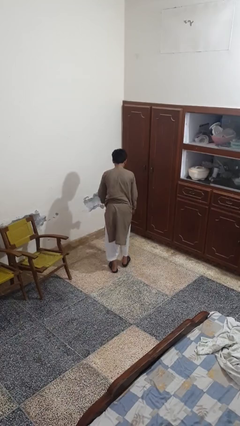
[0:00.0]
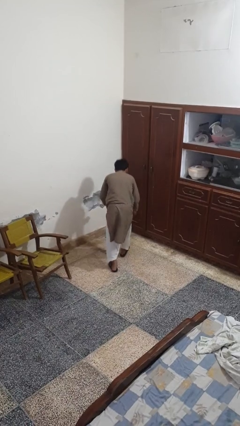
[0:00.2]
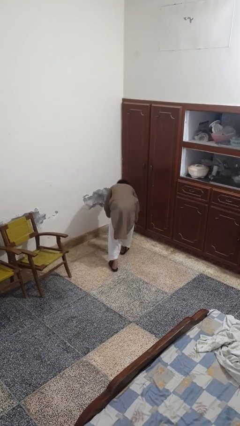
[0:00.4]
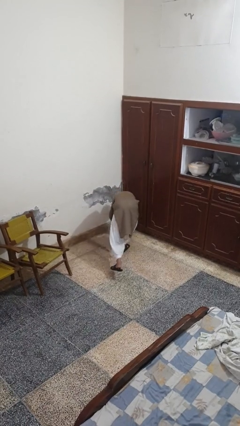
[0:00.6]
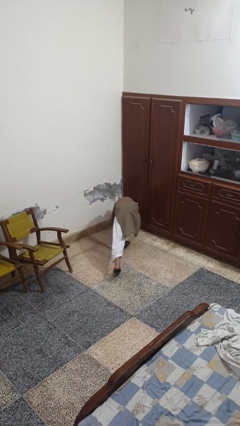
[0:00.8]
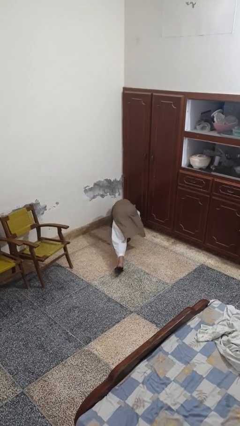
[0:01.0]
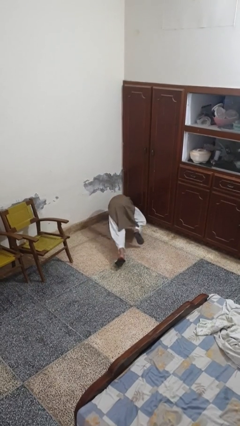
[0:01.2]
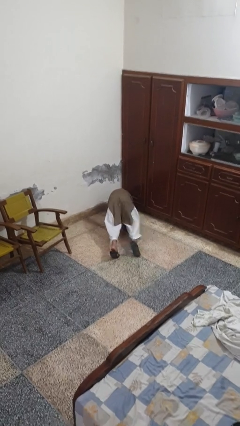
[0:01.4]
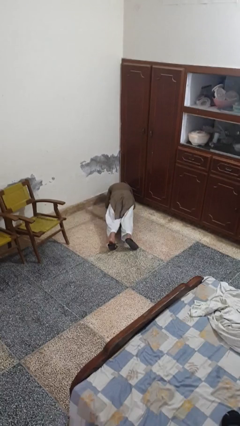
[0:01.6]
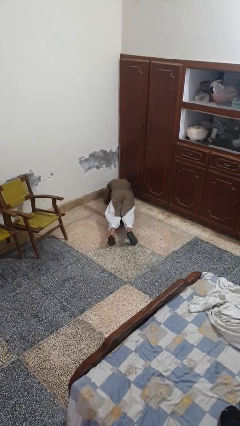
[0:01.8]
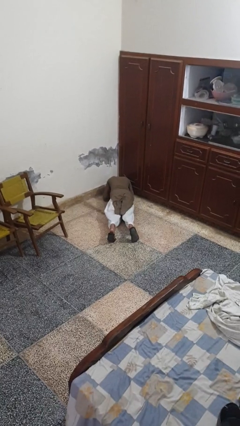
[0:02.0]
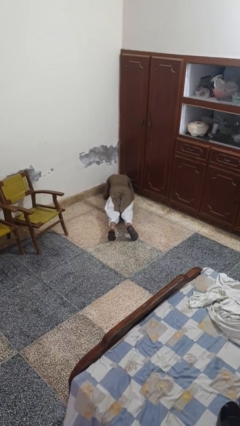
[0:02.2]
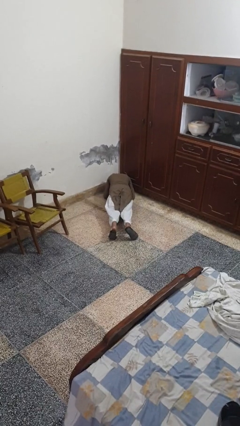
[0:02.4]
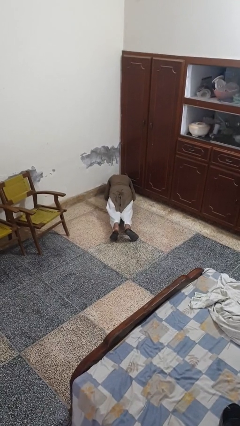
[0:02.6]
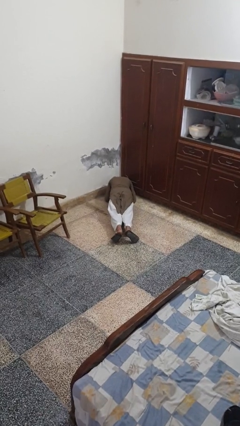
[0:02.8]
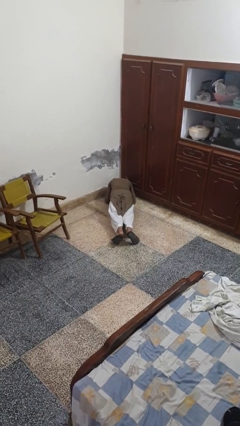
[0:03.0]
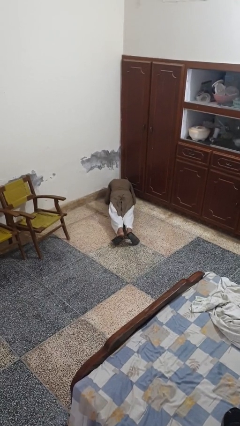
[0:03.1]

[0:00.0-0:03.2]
person exercises with plank

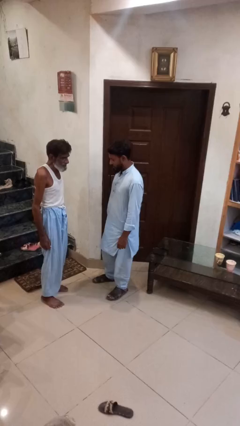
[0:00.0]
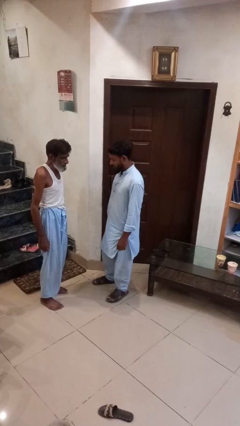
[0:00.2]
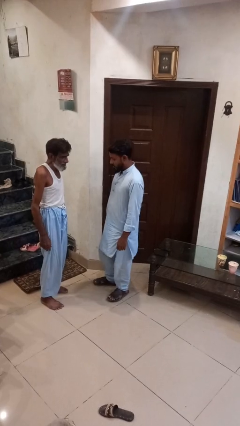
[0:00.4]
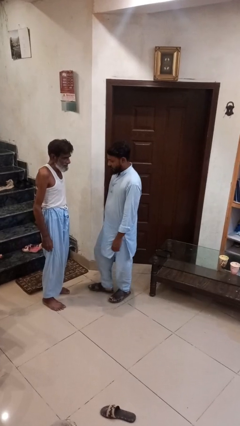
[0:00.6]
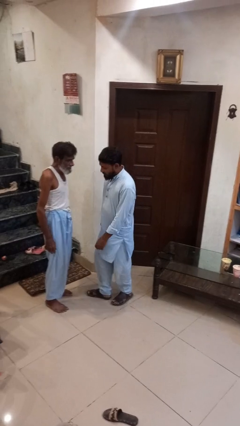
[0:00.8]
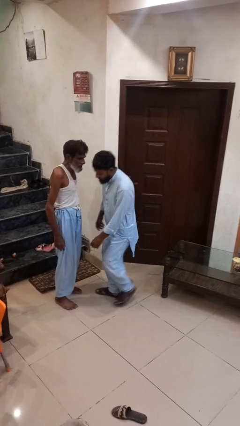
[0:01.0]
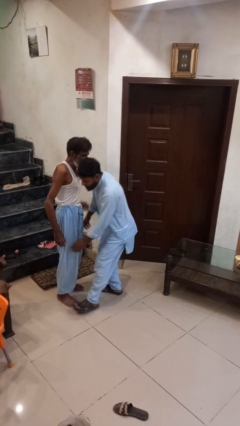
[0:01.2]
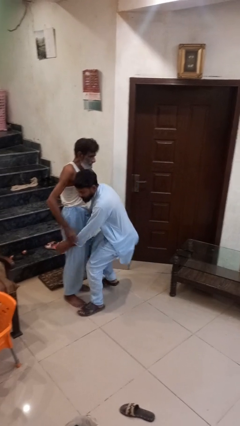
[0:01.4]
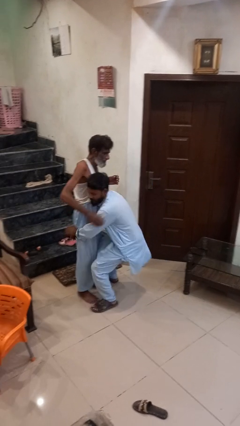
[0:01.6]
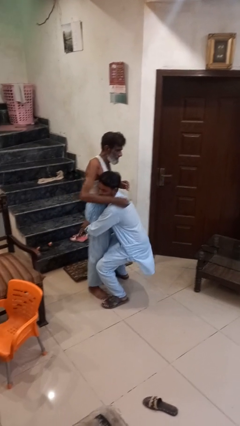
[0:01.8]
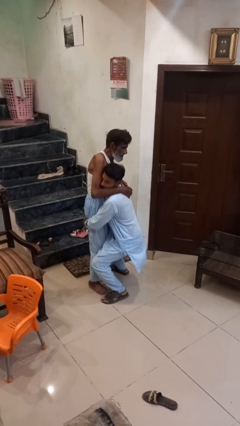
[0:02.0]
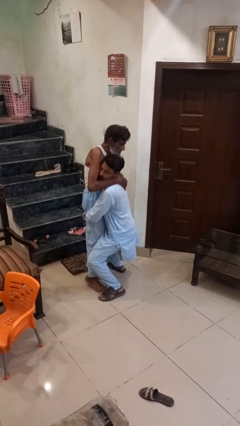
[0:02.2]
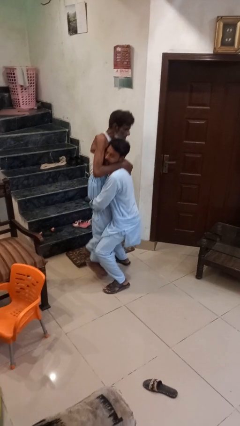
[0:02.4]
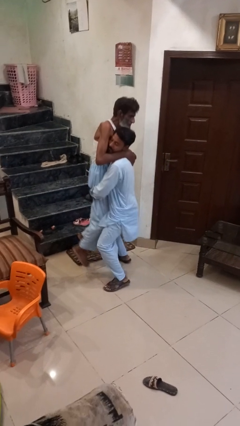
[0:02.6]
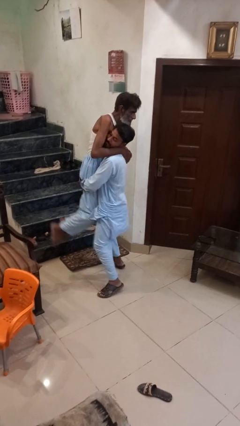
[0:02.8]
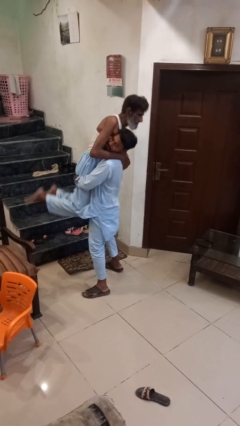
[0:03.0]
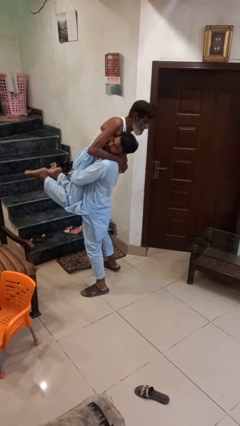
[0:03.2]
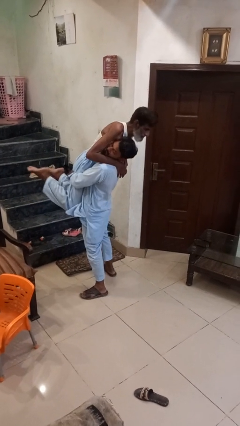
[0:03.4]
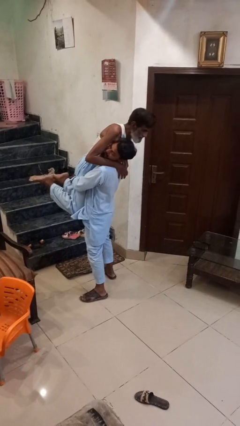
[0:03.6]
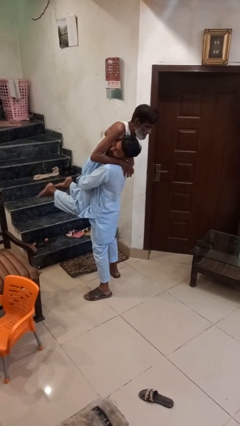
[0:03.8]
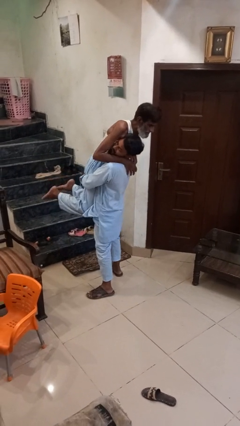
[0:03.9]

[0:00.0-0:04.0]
person picks up person

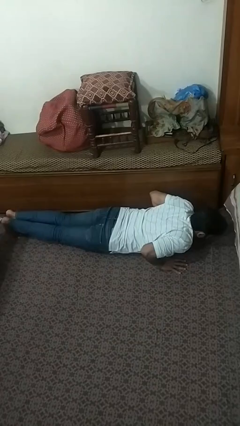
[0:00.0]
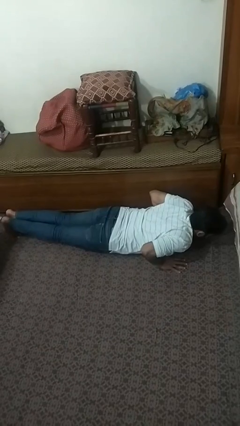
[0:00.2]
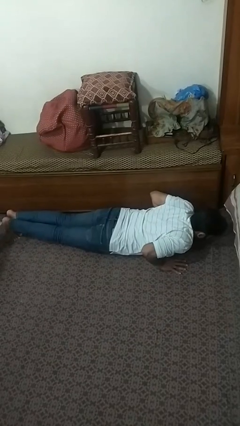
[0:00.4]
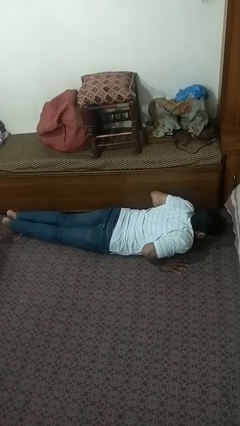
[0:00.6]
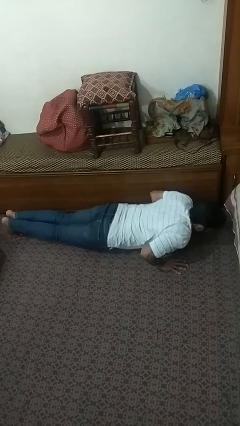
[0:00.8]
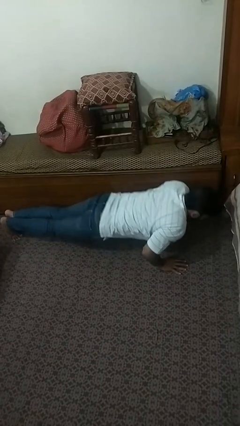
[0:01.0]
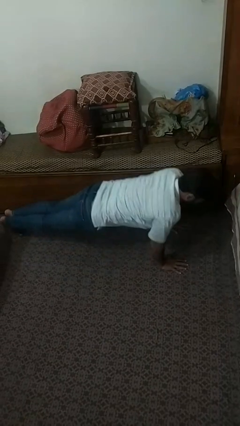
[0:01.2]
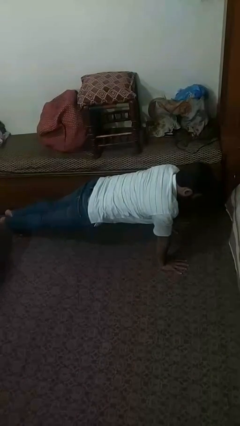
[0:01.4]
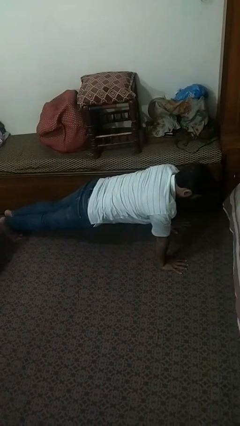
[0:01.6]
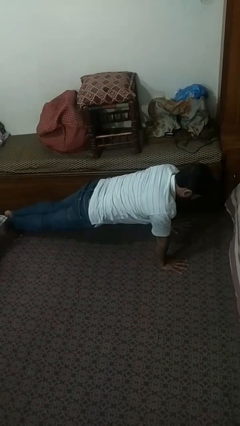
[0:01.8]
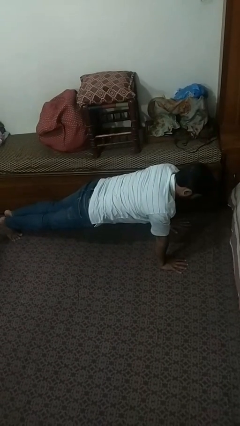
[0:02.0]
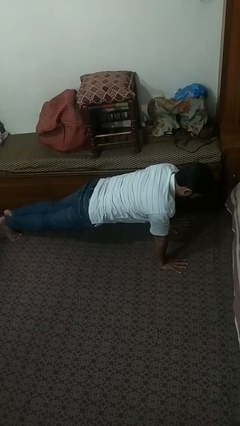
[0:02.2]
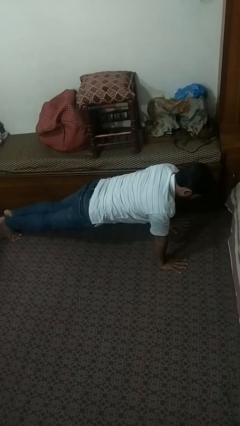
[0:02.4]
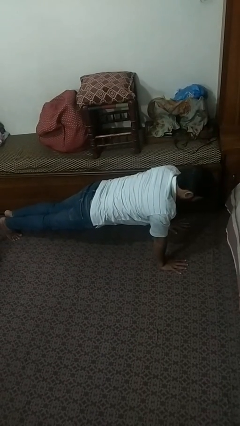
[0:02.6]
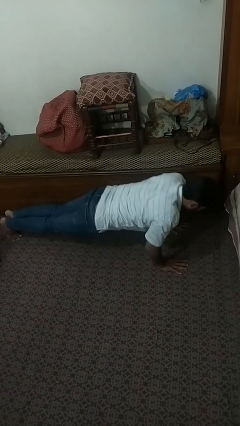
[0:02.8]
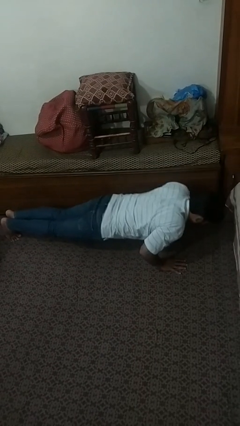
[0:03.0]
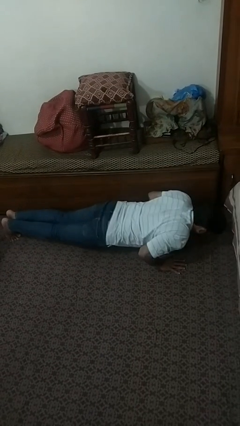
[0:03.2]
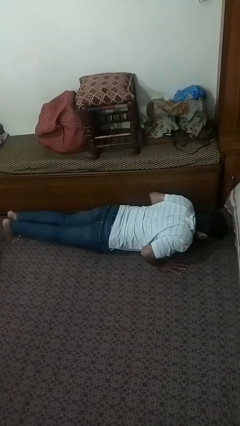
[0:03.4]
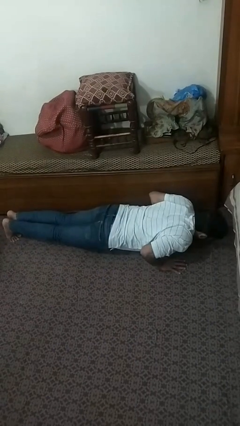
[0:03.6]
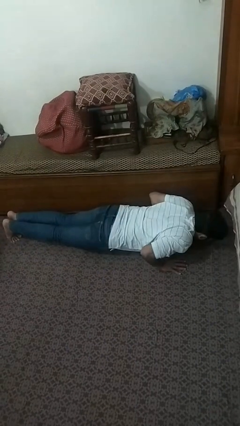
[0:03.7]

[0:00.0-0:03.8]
person exercises with pushup

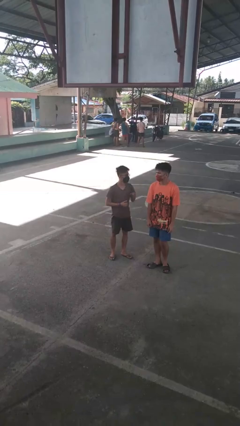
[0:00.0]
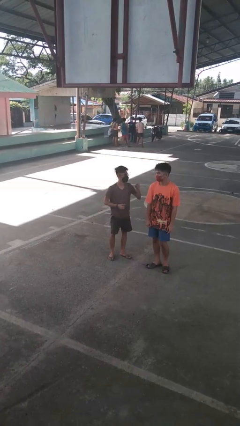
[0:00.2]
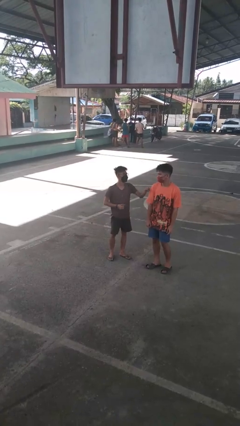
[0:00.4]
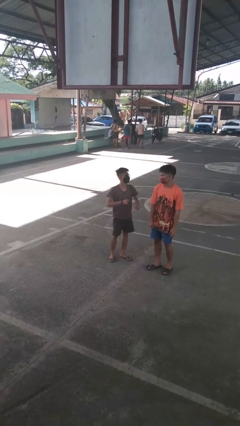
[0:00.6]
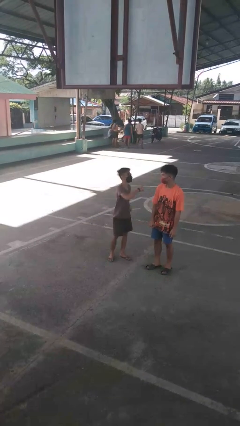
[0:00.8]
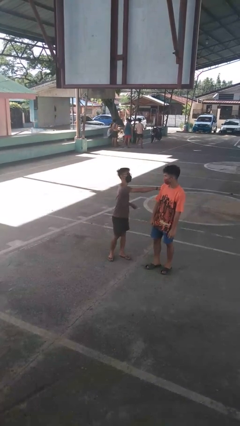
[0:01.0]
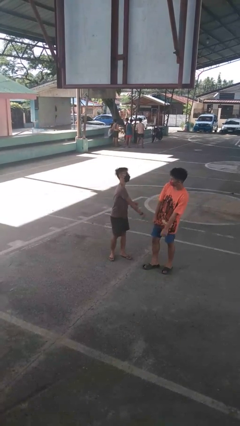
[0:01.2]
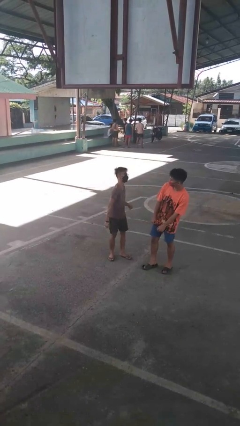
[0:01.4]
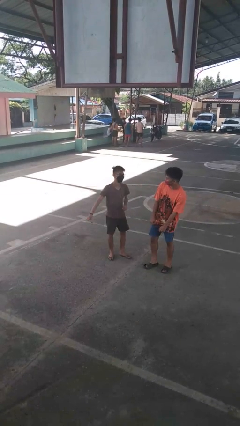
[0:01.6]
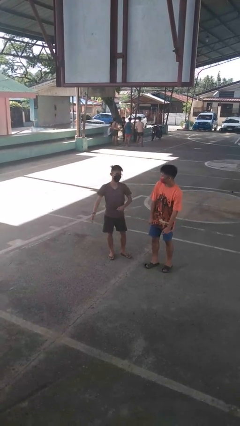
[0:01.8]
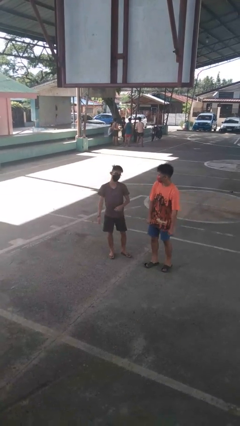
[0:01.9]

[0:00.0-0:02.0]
person pounds shoulders of person

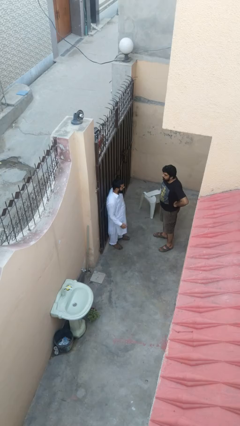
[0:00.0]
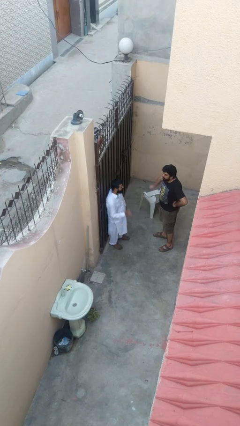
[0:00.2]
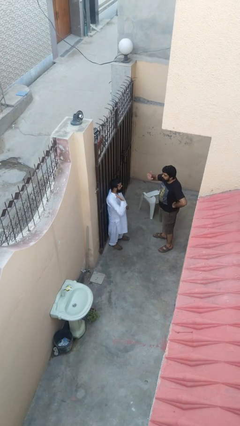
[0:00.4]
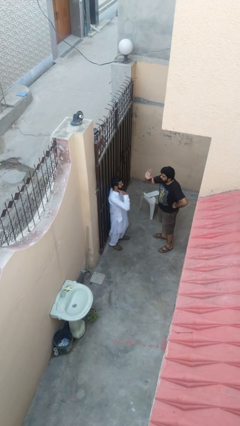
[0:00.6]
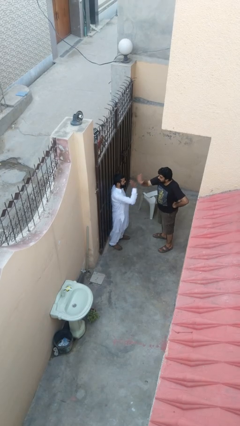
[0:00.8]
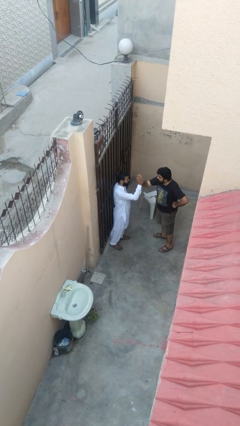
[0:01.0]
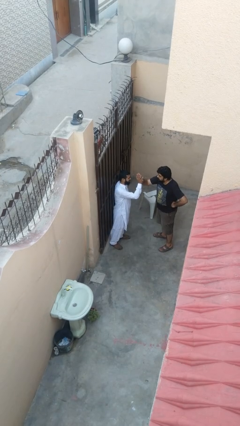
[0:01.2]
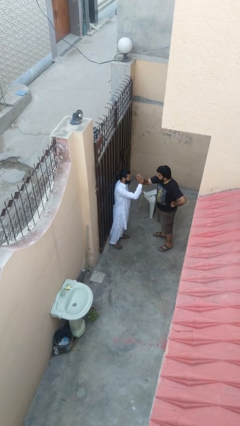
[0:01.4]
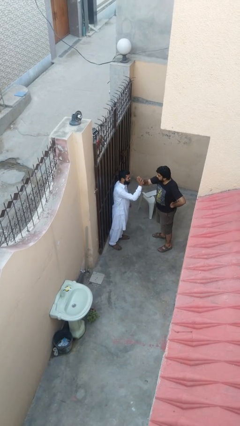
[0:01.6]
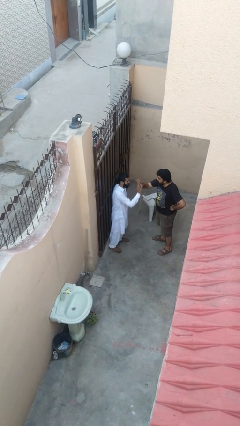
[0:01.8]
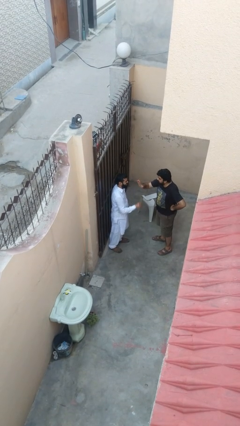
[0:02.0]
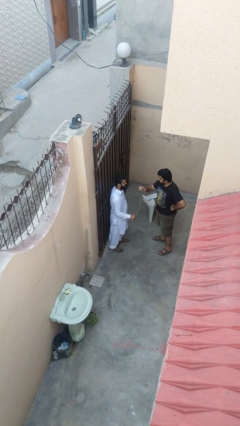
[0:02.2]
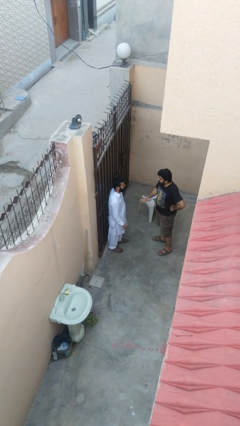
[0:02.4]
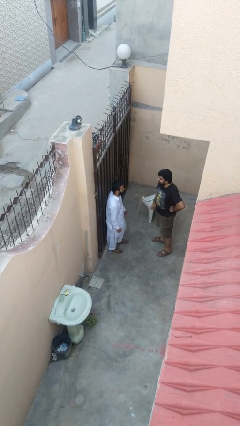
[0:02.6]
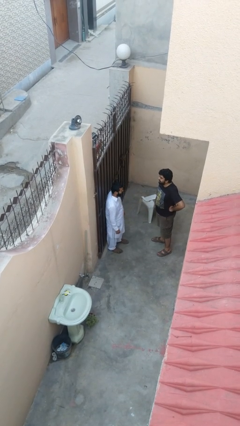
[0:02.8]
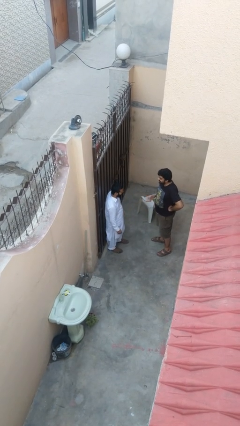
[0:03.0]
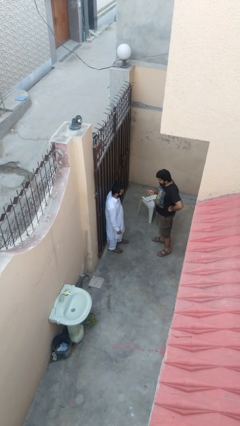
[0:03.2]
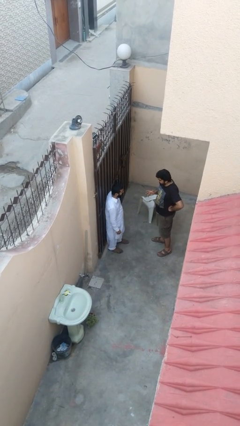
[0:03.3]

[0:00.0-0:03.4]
person highfives hand

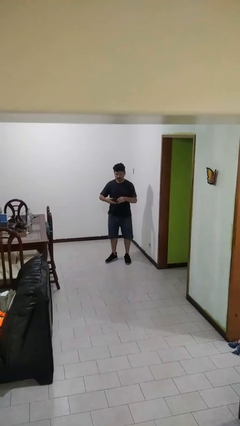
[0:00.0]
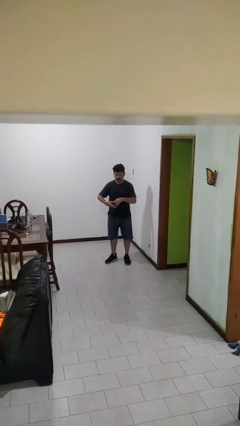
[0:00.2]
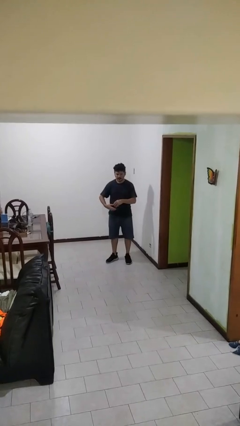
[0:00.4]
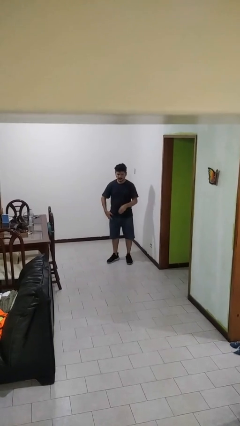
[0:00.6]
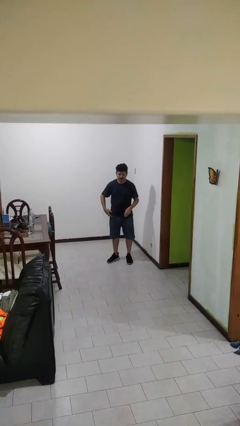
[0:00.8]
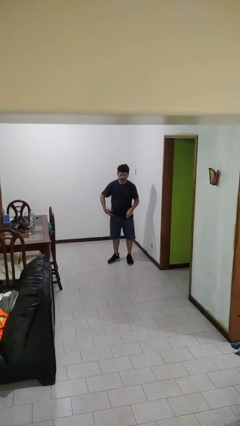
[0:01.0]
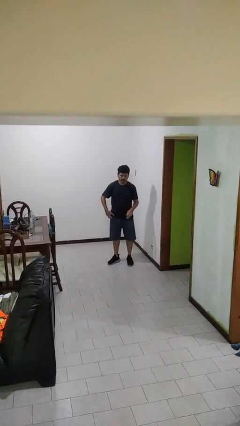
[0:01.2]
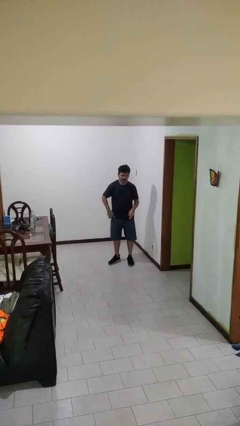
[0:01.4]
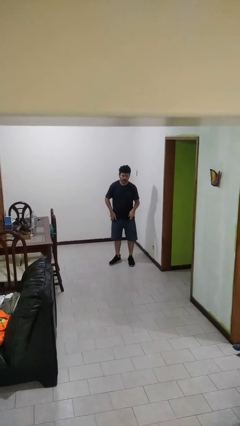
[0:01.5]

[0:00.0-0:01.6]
person puts phone into pocket
